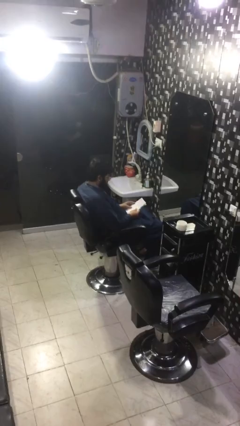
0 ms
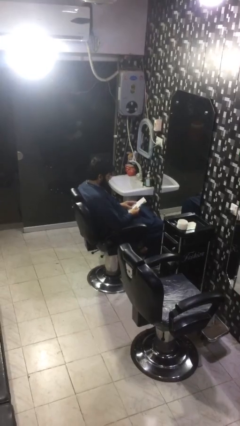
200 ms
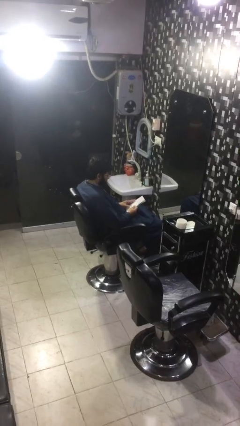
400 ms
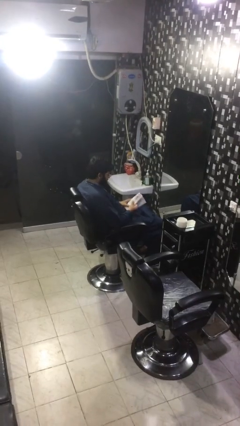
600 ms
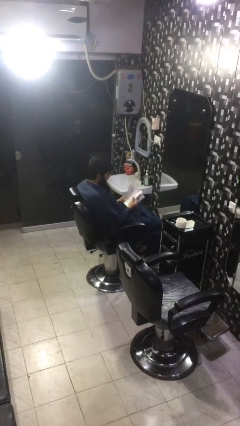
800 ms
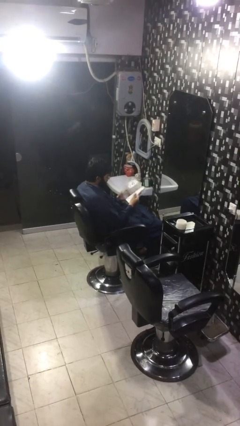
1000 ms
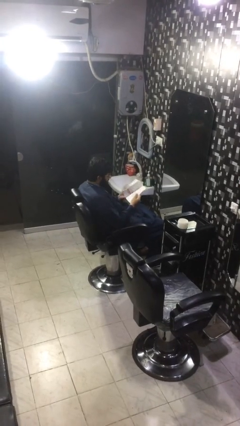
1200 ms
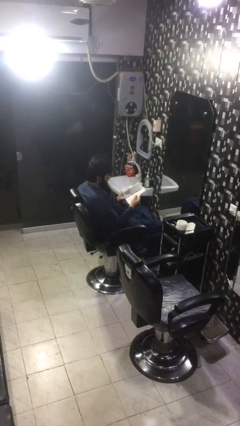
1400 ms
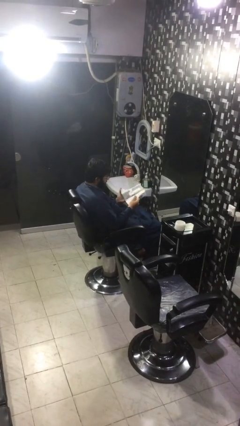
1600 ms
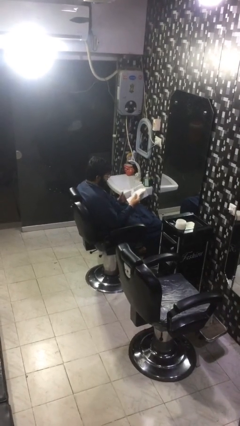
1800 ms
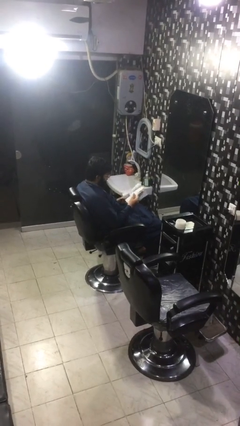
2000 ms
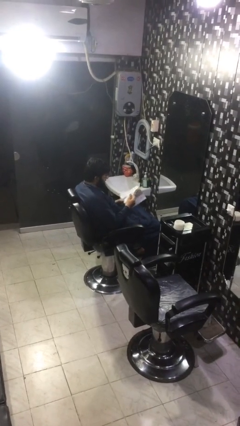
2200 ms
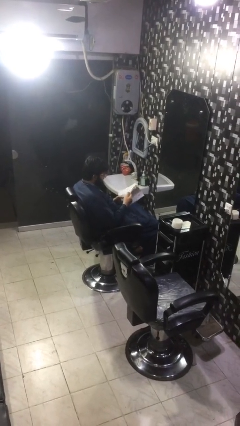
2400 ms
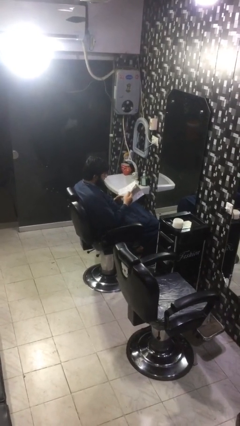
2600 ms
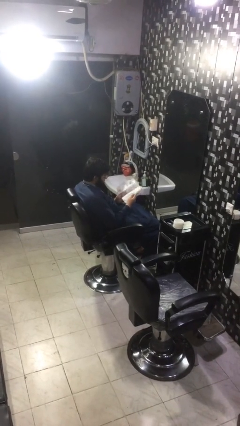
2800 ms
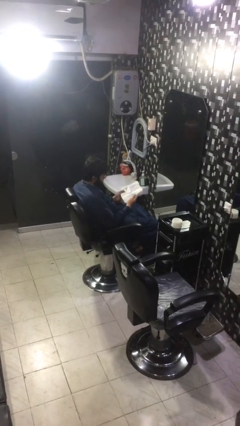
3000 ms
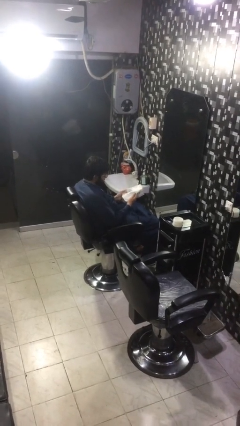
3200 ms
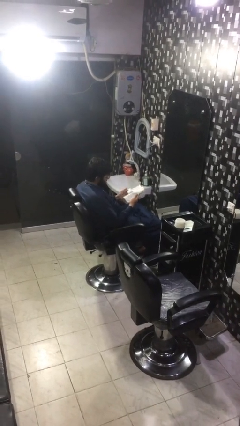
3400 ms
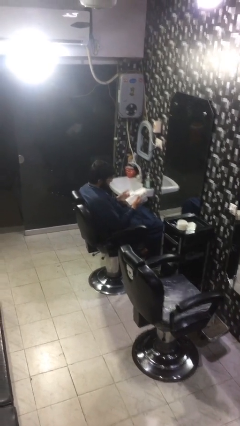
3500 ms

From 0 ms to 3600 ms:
person reads document

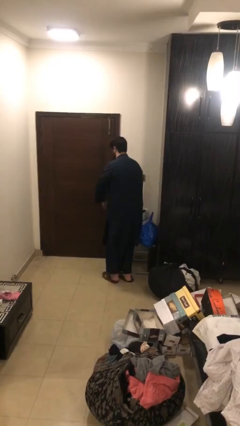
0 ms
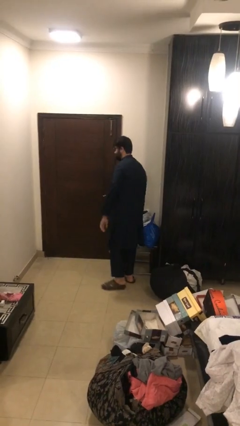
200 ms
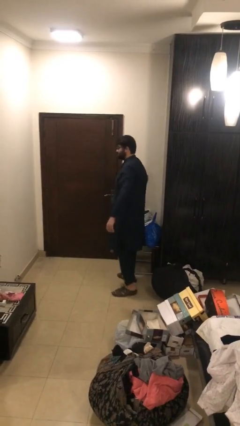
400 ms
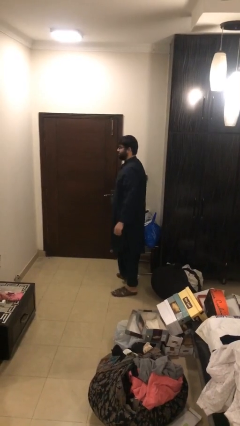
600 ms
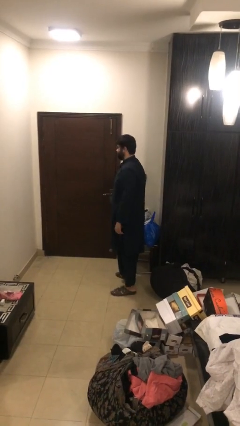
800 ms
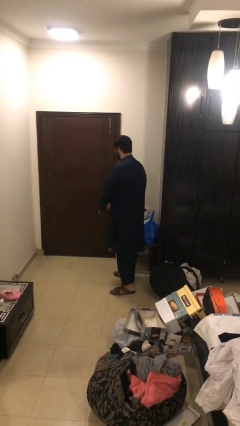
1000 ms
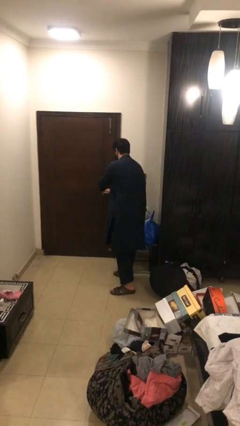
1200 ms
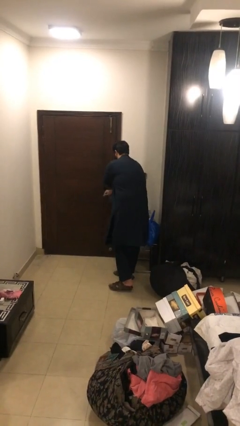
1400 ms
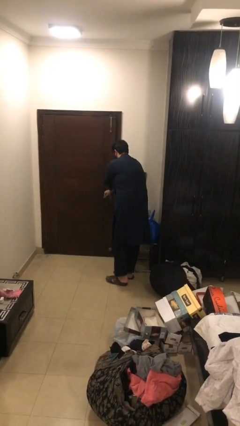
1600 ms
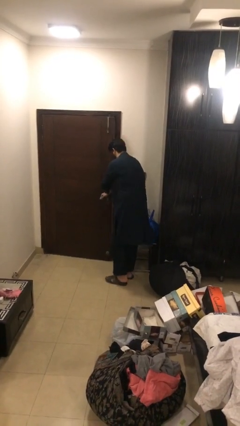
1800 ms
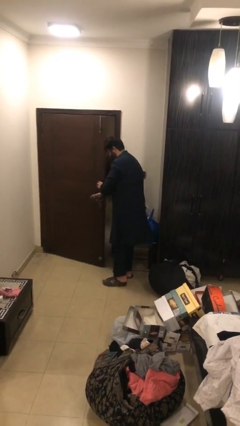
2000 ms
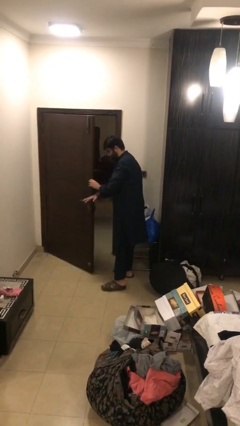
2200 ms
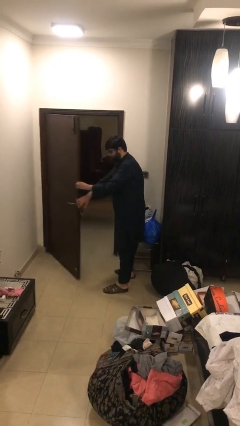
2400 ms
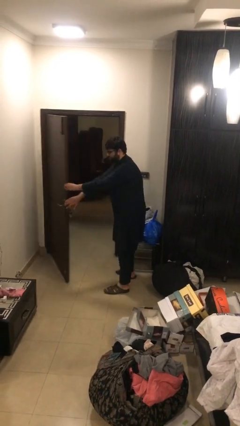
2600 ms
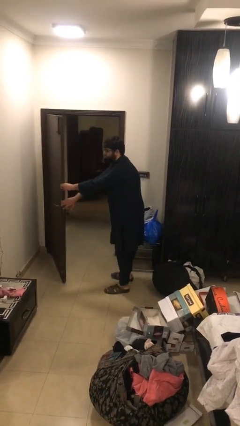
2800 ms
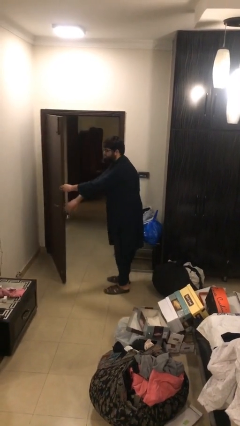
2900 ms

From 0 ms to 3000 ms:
person opens facility door

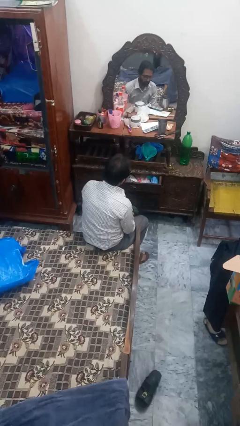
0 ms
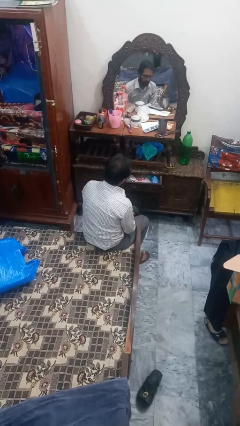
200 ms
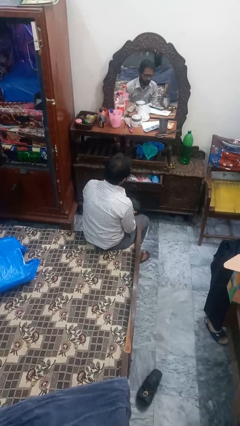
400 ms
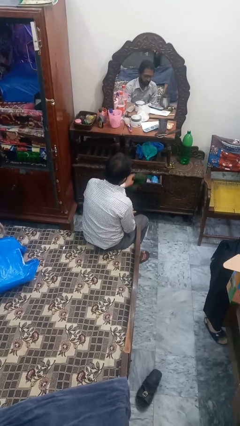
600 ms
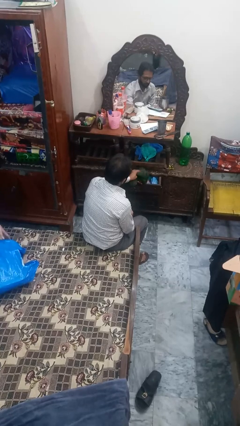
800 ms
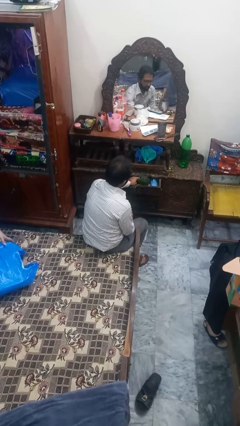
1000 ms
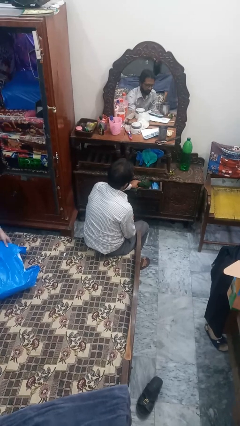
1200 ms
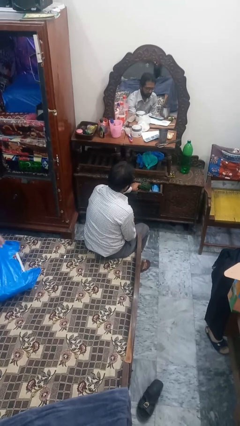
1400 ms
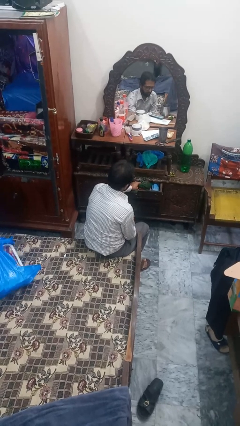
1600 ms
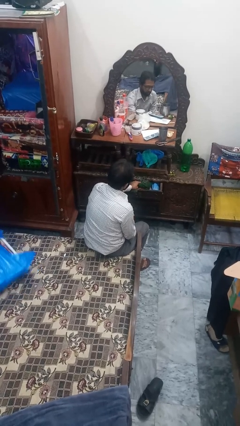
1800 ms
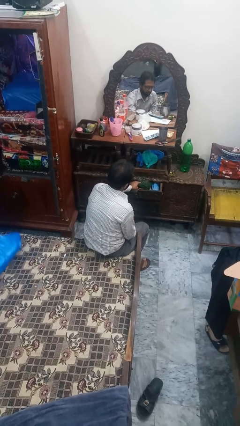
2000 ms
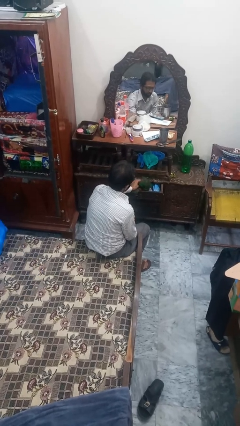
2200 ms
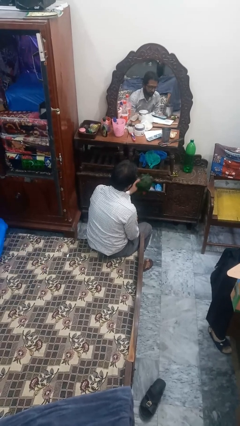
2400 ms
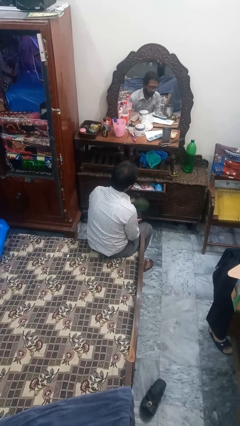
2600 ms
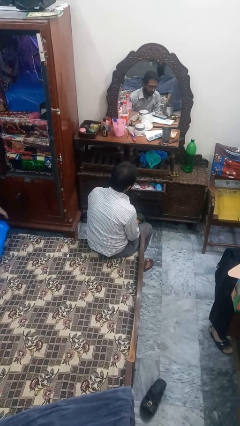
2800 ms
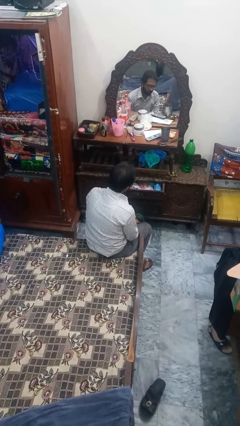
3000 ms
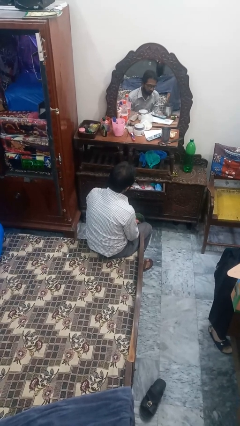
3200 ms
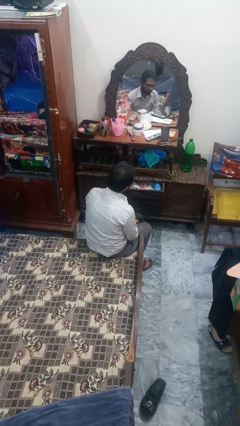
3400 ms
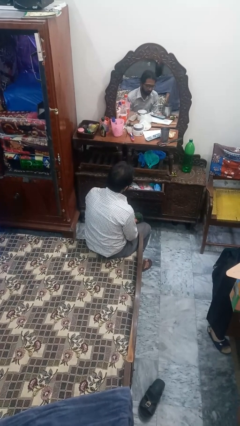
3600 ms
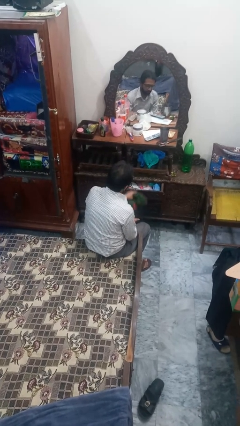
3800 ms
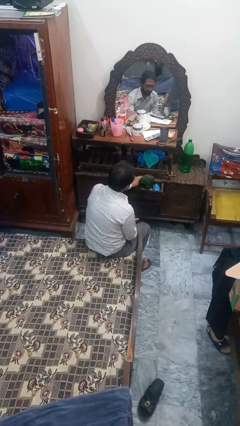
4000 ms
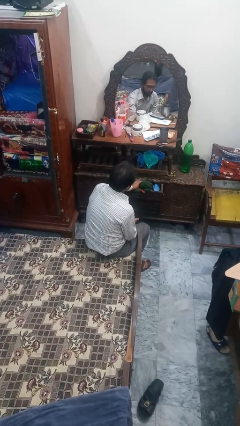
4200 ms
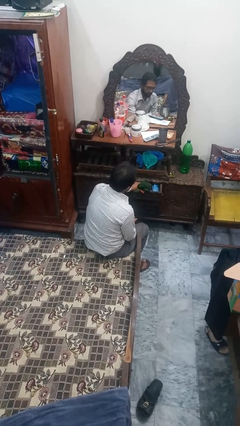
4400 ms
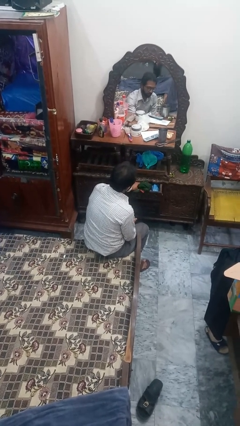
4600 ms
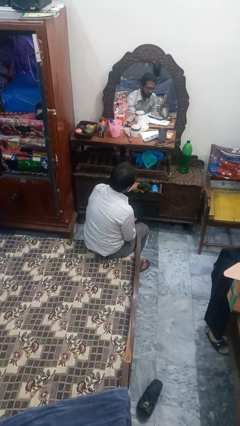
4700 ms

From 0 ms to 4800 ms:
person puts clothes into dresser

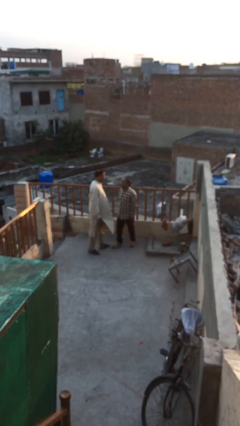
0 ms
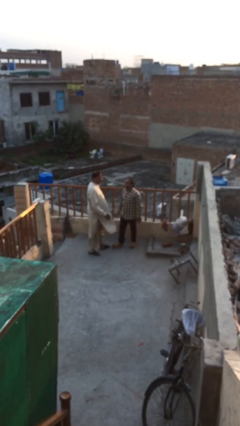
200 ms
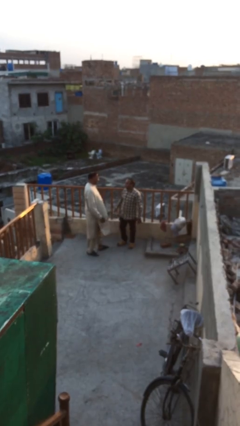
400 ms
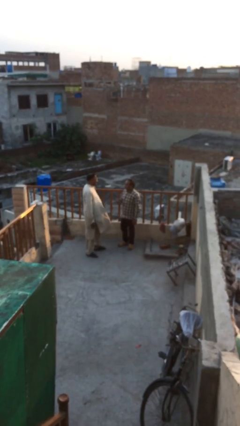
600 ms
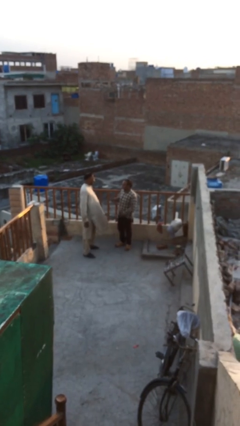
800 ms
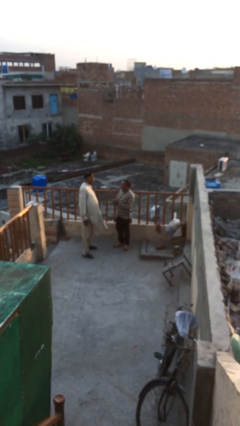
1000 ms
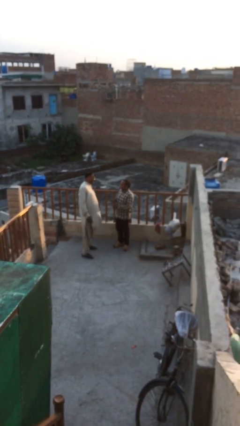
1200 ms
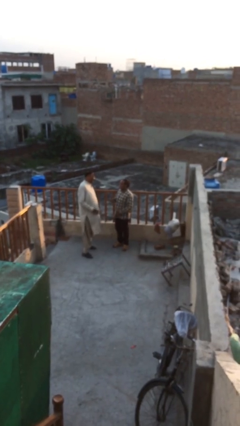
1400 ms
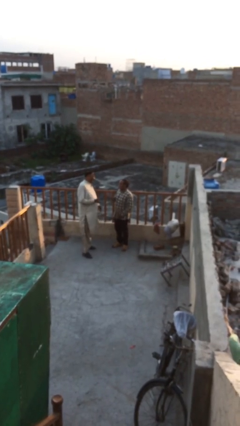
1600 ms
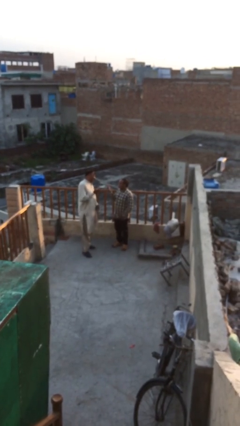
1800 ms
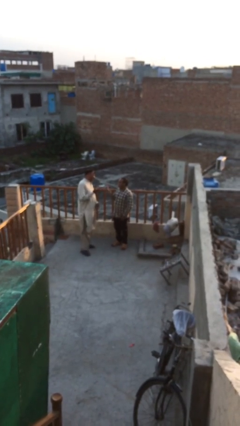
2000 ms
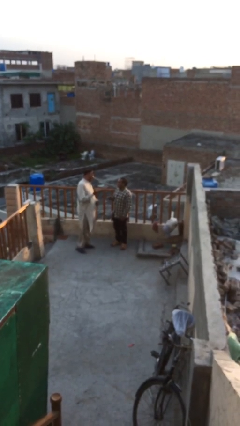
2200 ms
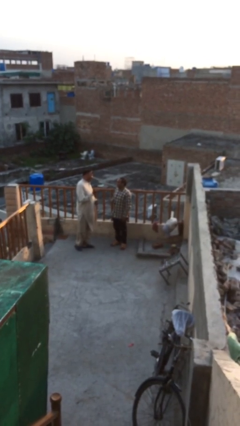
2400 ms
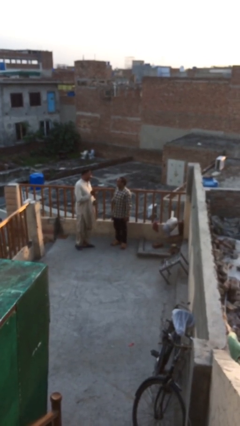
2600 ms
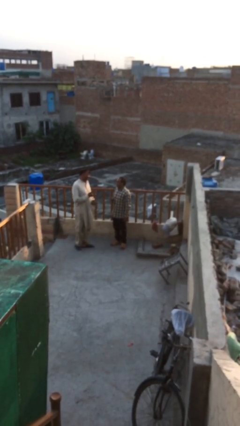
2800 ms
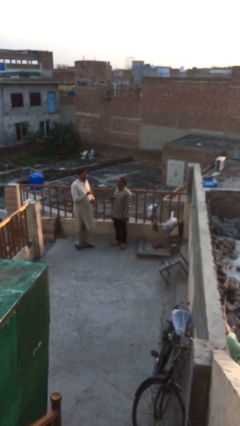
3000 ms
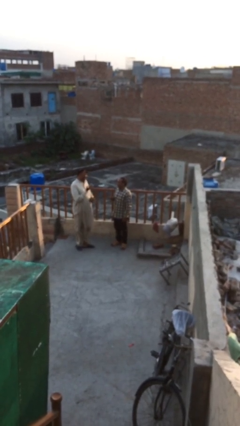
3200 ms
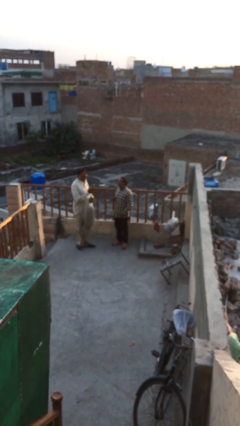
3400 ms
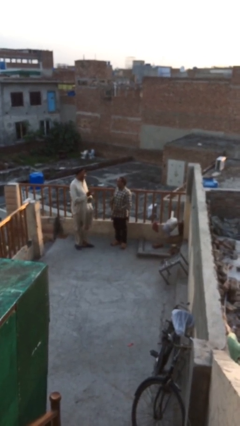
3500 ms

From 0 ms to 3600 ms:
person talks to person

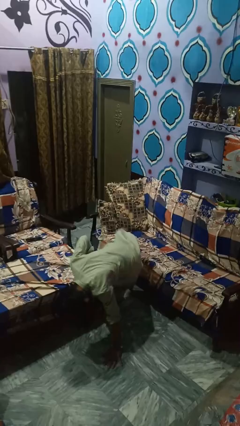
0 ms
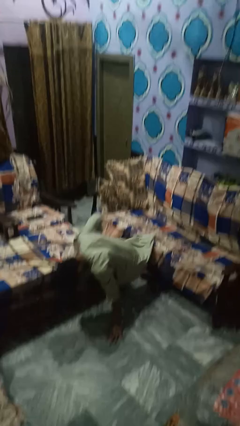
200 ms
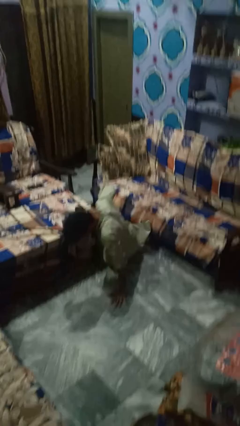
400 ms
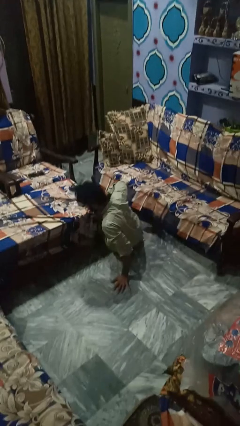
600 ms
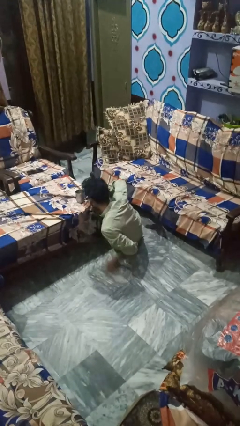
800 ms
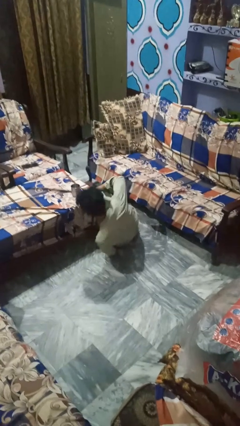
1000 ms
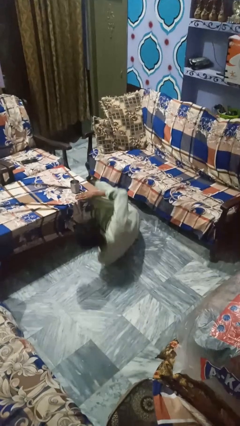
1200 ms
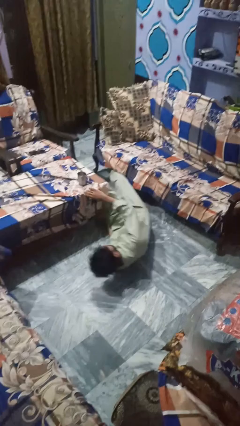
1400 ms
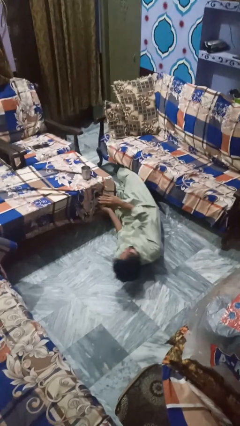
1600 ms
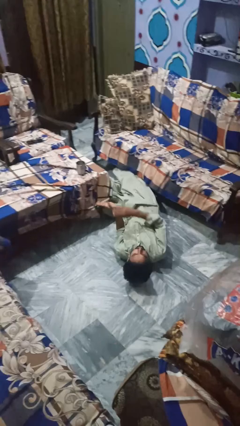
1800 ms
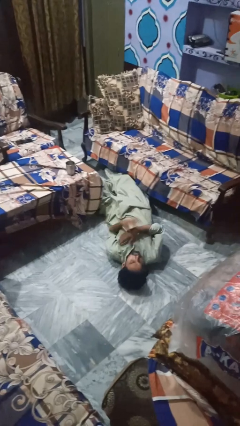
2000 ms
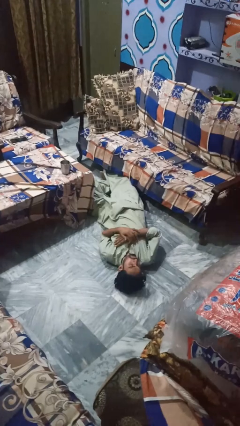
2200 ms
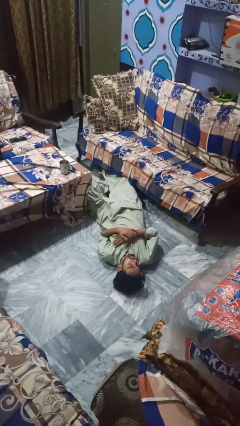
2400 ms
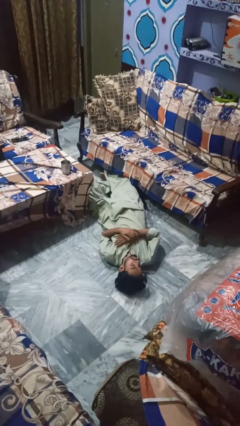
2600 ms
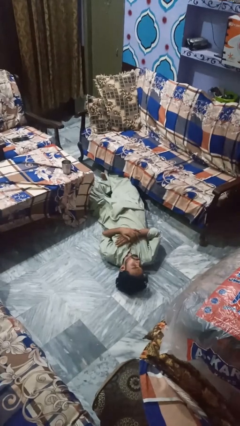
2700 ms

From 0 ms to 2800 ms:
person lies down on floor
